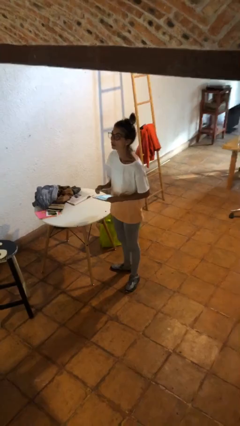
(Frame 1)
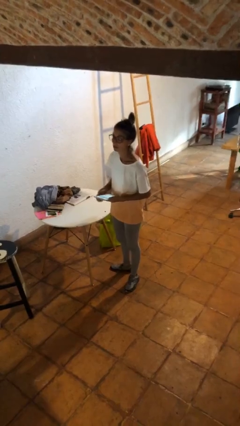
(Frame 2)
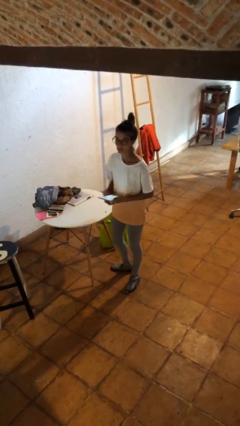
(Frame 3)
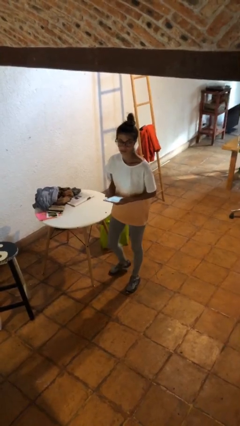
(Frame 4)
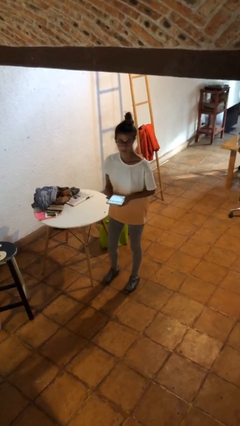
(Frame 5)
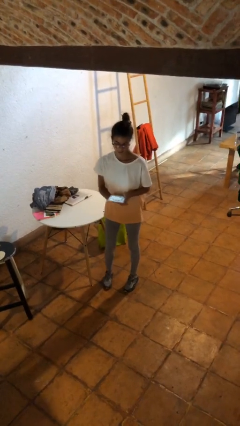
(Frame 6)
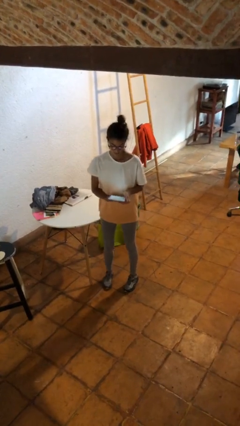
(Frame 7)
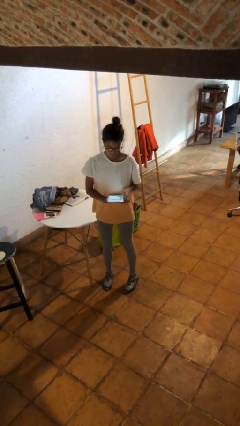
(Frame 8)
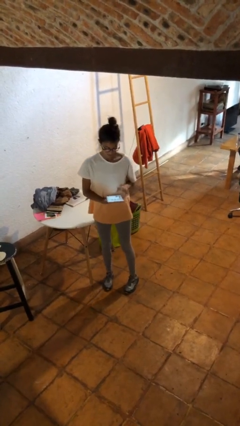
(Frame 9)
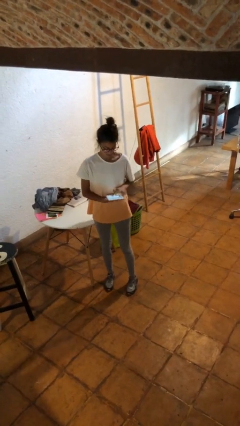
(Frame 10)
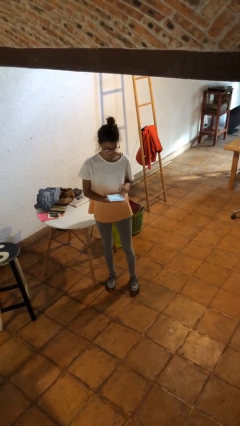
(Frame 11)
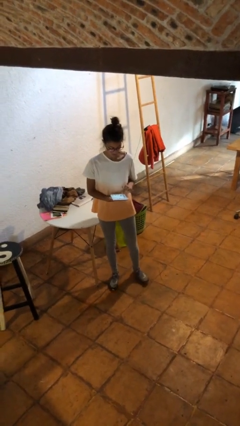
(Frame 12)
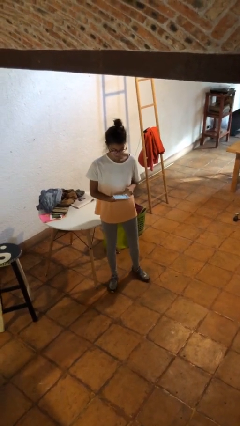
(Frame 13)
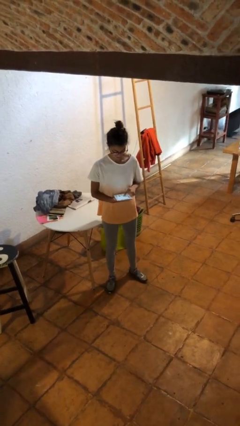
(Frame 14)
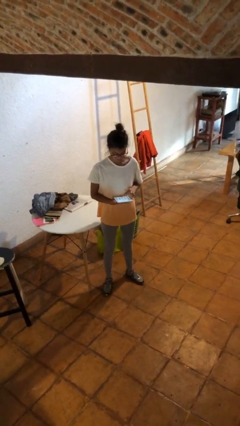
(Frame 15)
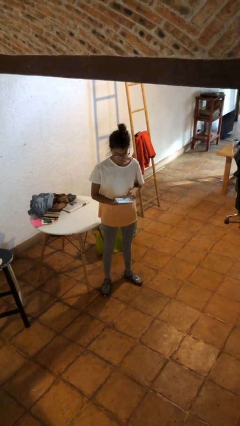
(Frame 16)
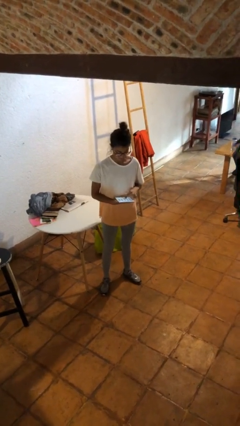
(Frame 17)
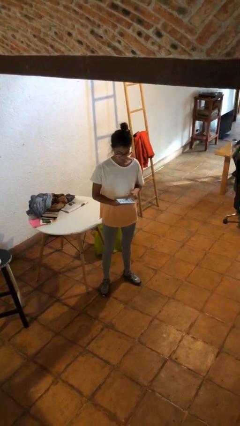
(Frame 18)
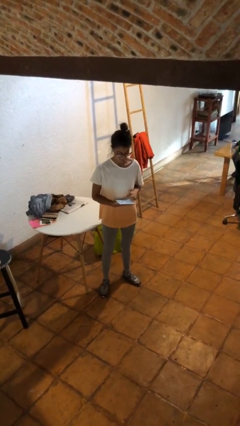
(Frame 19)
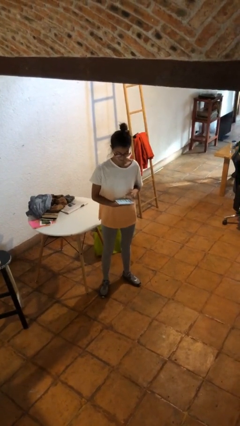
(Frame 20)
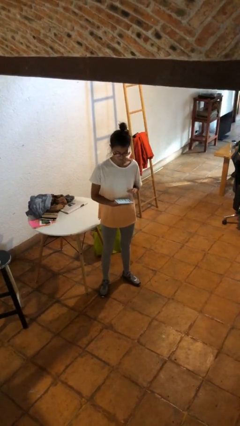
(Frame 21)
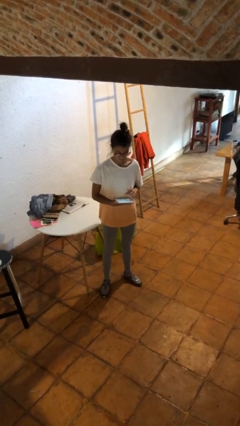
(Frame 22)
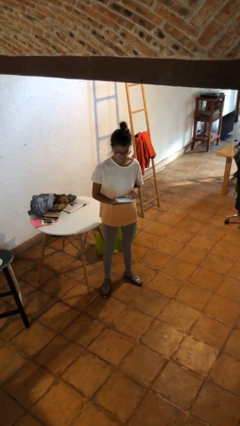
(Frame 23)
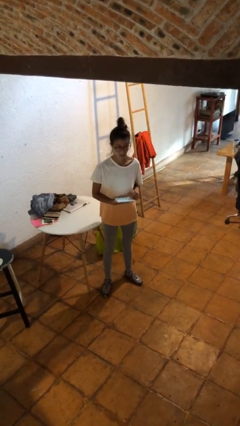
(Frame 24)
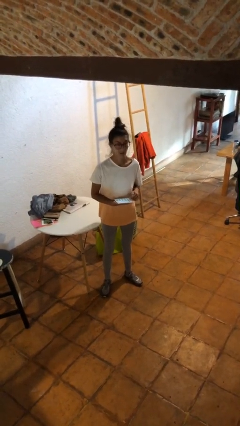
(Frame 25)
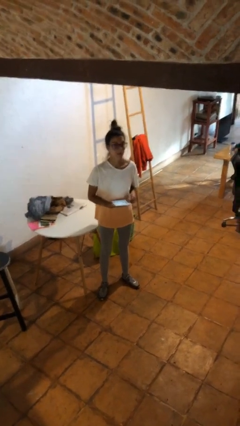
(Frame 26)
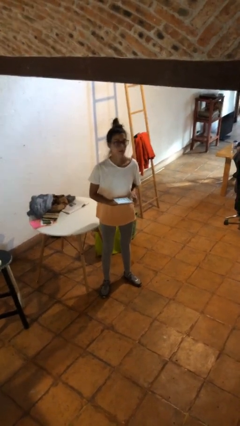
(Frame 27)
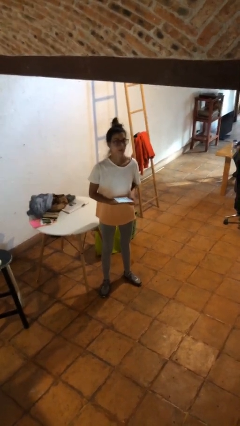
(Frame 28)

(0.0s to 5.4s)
person interacts with tablet

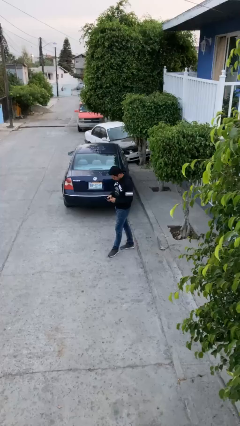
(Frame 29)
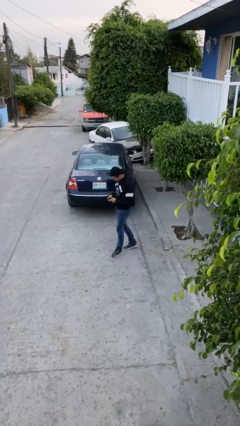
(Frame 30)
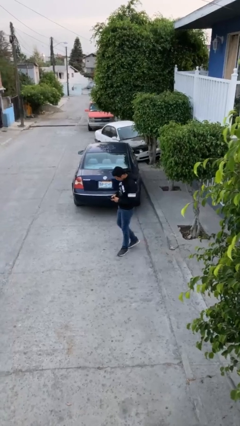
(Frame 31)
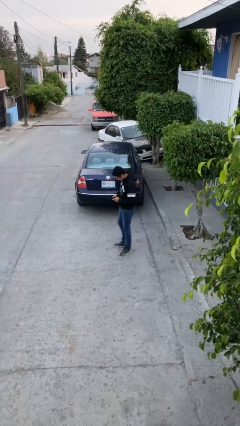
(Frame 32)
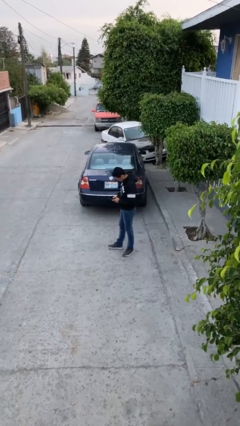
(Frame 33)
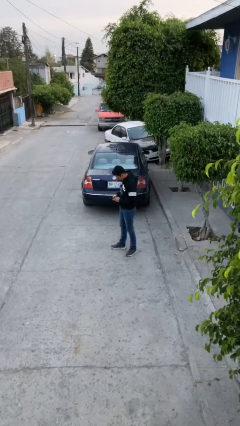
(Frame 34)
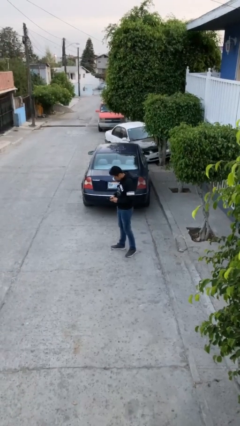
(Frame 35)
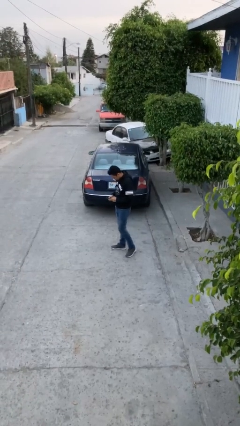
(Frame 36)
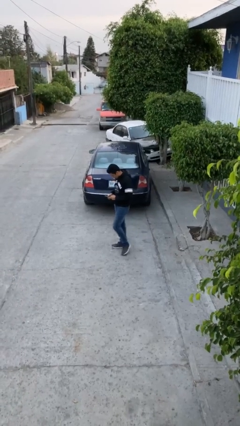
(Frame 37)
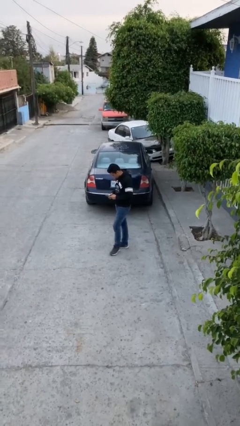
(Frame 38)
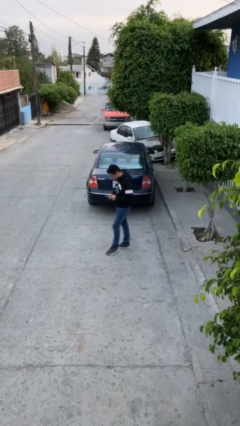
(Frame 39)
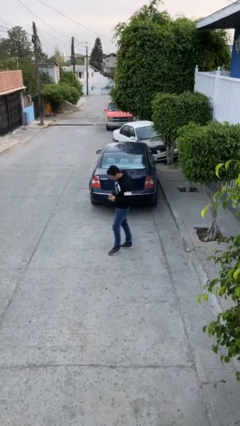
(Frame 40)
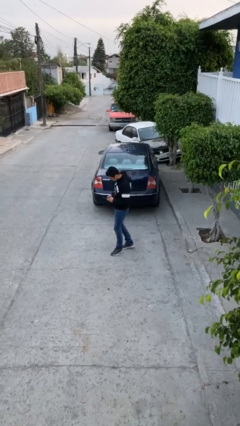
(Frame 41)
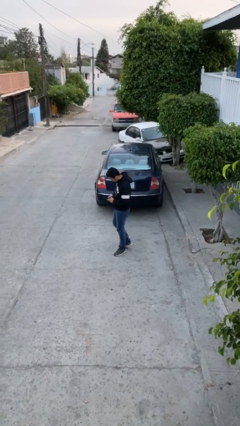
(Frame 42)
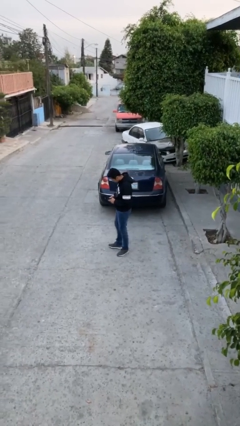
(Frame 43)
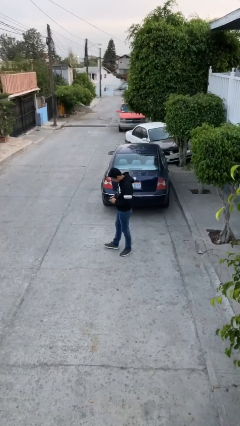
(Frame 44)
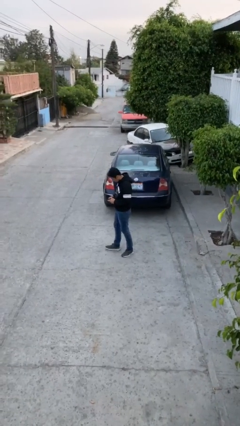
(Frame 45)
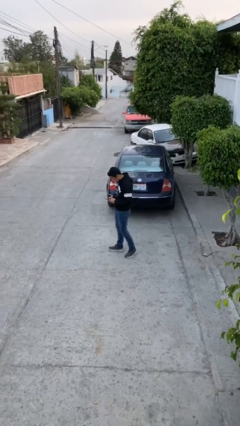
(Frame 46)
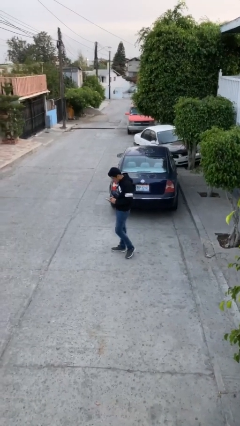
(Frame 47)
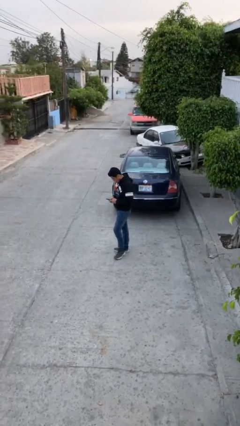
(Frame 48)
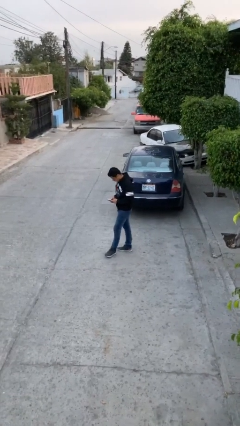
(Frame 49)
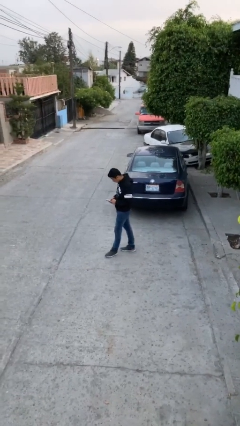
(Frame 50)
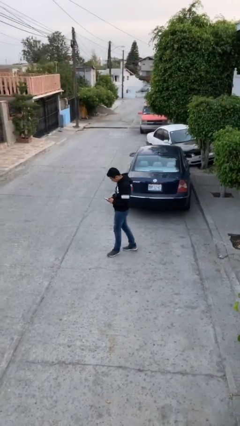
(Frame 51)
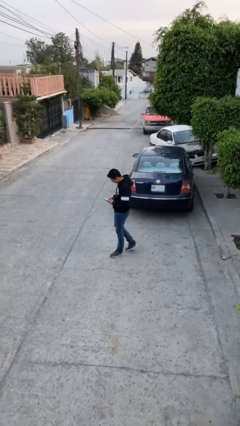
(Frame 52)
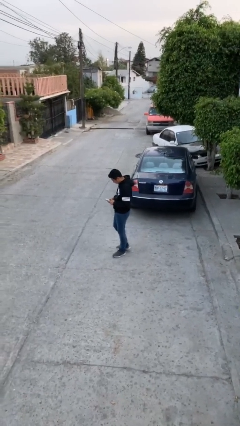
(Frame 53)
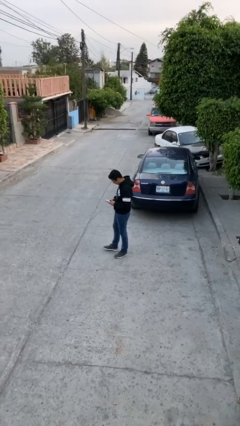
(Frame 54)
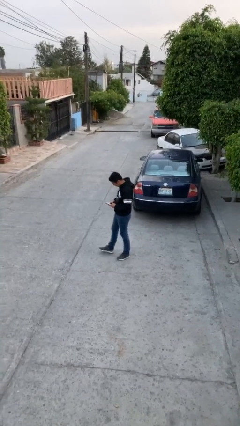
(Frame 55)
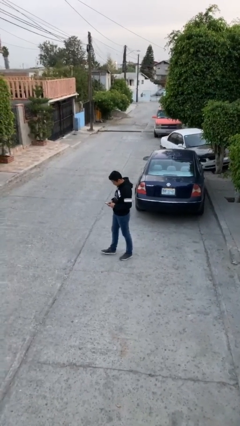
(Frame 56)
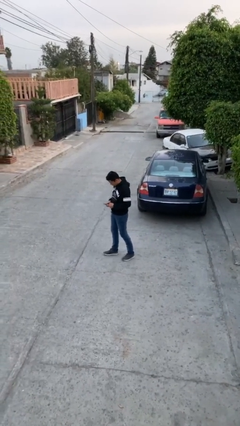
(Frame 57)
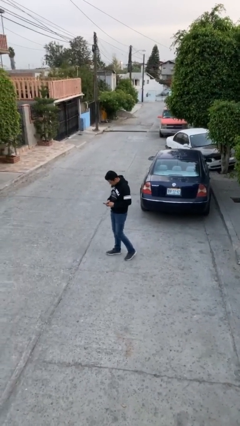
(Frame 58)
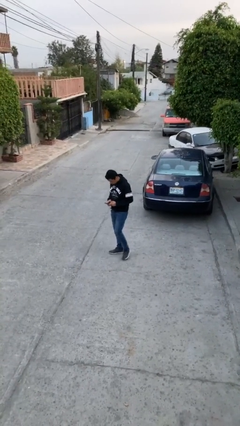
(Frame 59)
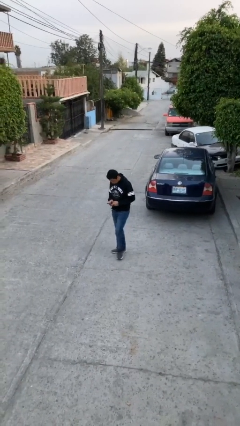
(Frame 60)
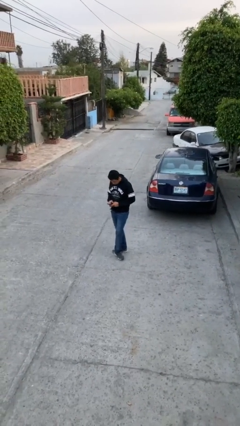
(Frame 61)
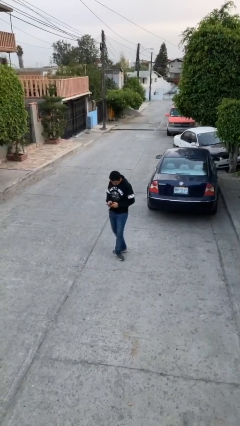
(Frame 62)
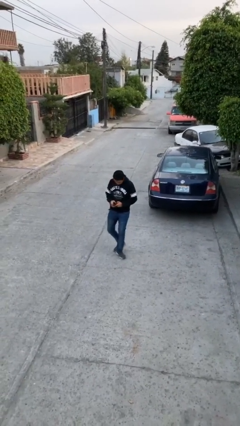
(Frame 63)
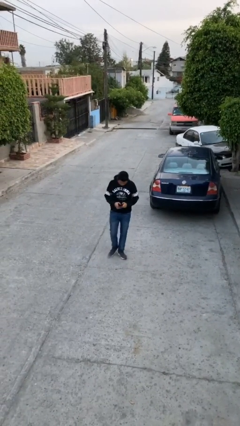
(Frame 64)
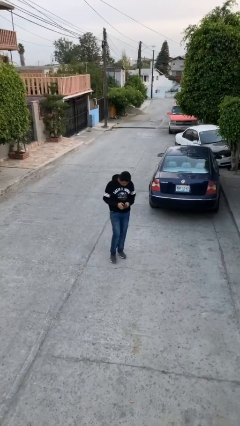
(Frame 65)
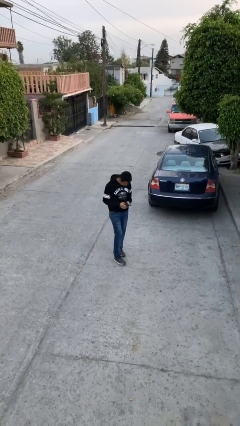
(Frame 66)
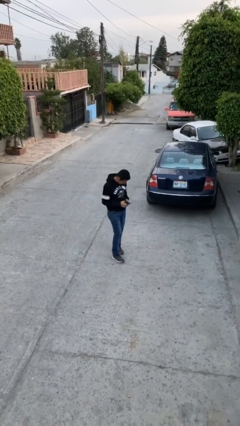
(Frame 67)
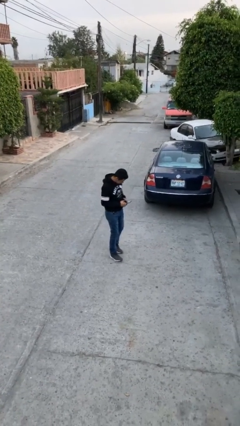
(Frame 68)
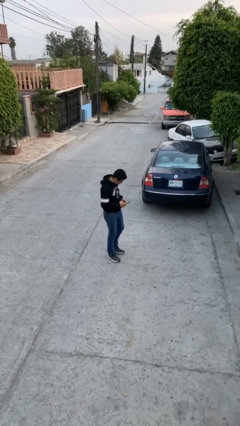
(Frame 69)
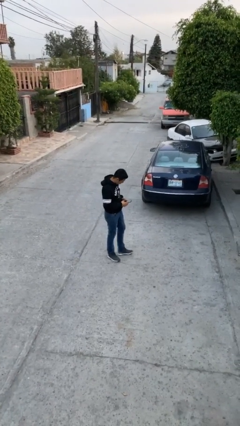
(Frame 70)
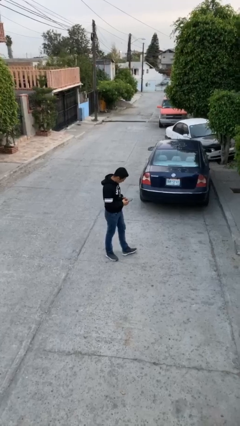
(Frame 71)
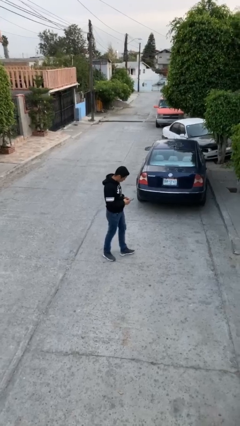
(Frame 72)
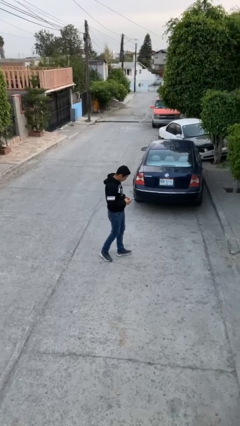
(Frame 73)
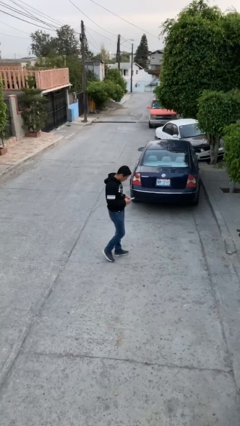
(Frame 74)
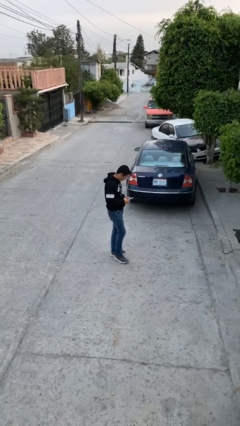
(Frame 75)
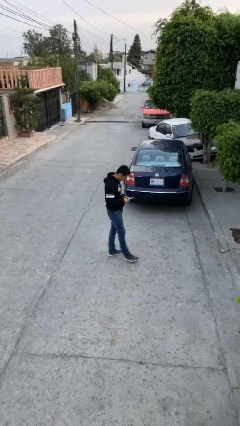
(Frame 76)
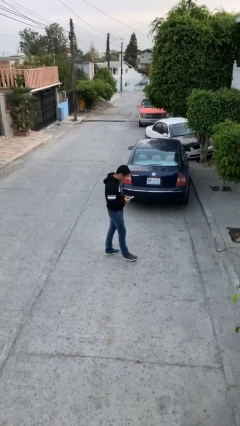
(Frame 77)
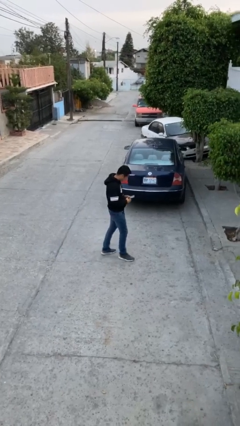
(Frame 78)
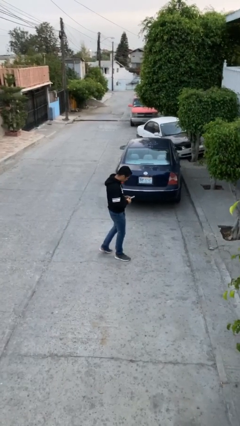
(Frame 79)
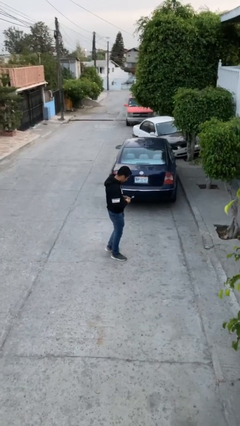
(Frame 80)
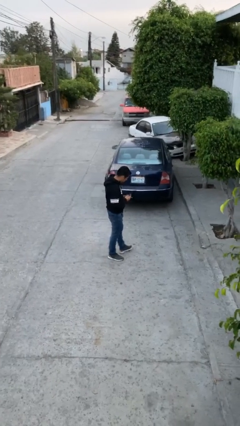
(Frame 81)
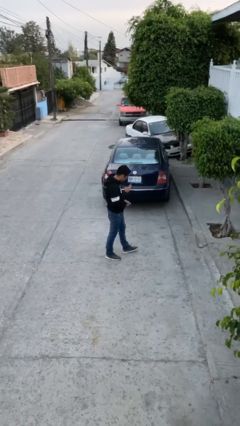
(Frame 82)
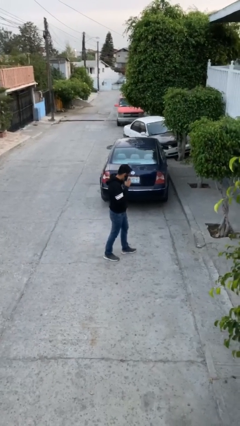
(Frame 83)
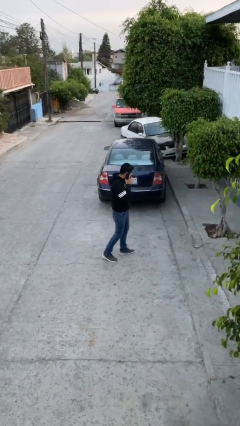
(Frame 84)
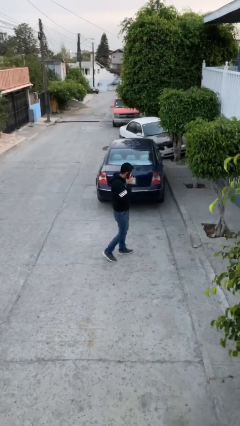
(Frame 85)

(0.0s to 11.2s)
person texts on phone

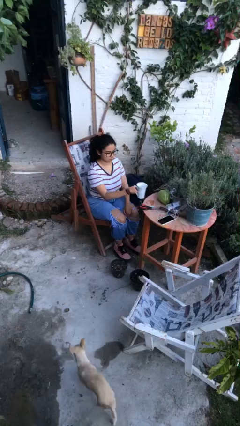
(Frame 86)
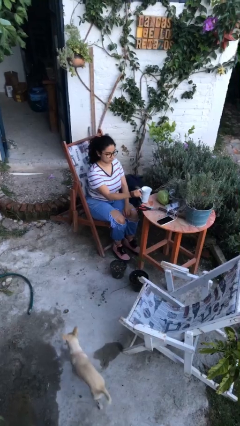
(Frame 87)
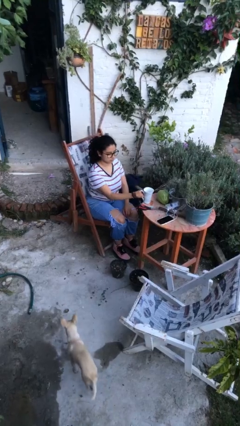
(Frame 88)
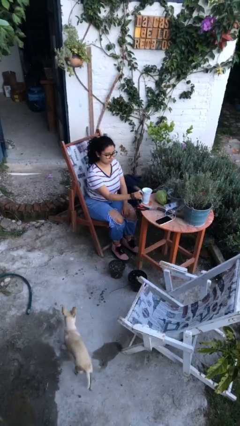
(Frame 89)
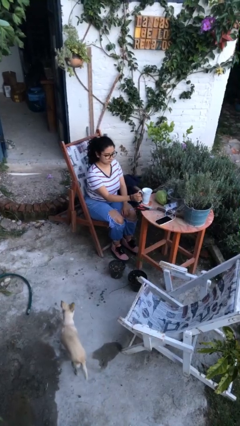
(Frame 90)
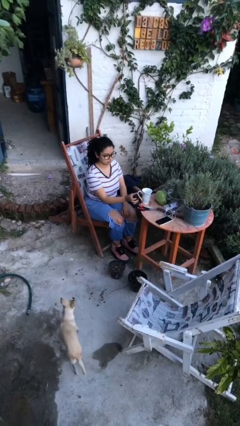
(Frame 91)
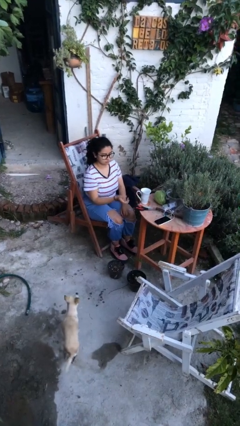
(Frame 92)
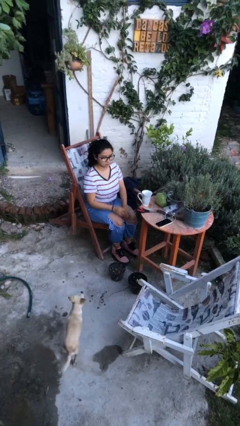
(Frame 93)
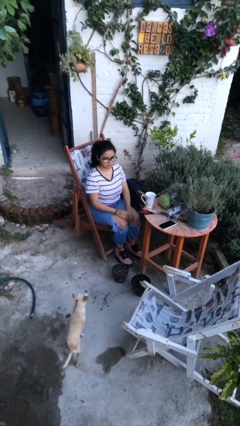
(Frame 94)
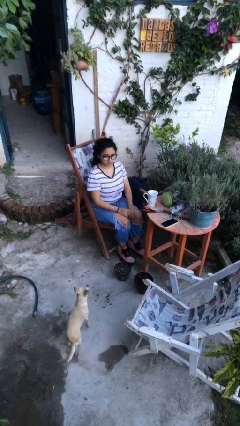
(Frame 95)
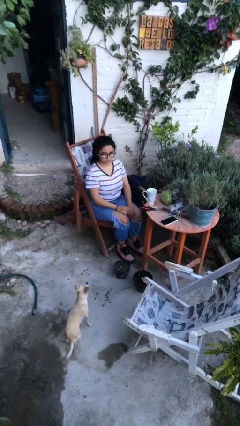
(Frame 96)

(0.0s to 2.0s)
person puts down object on table
